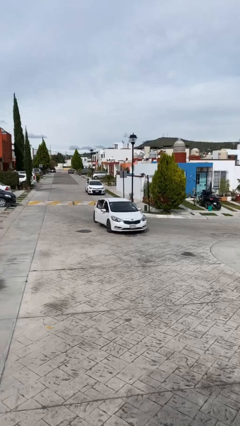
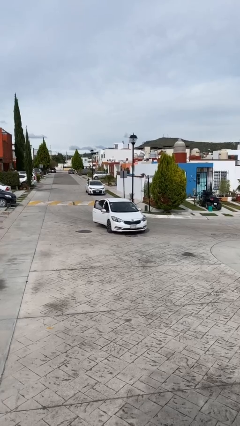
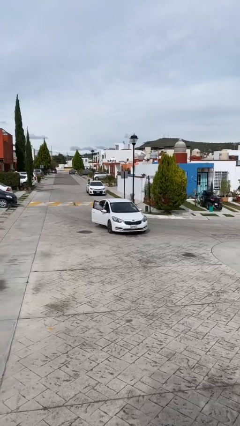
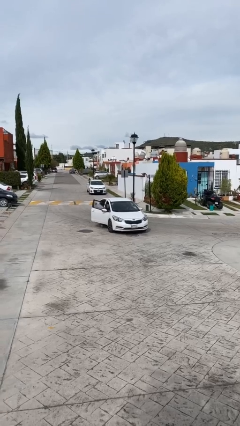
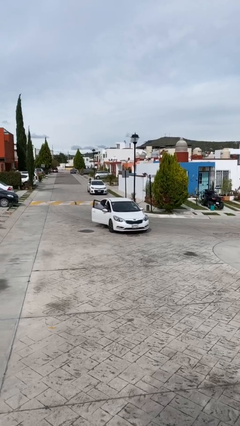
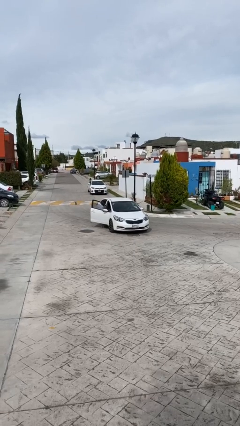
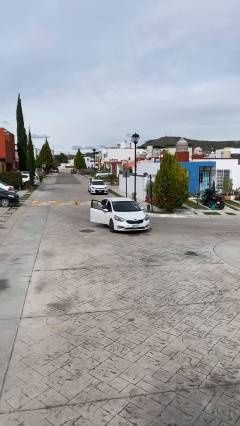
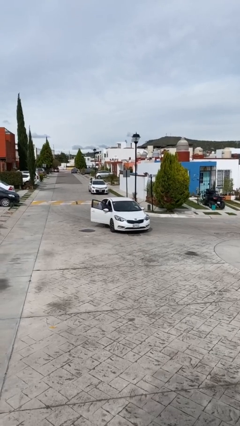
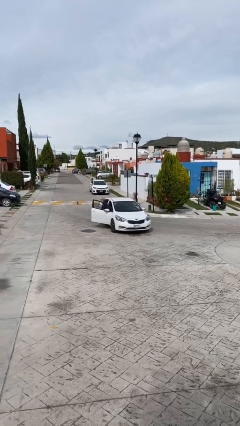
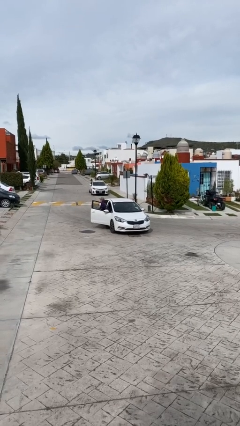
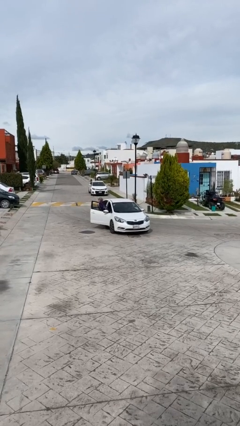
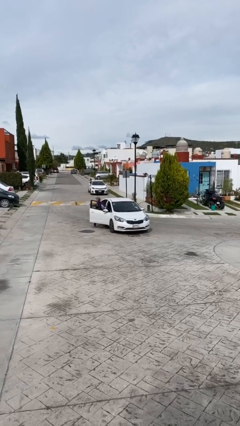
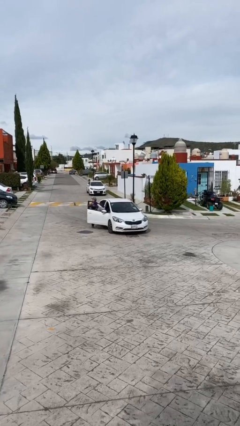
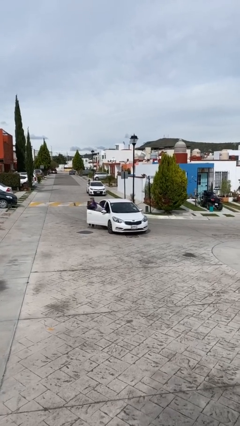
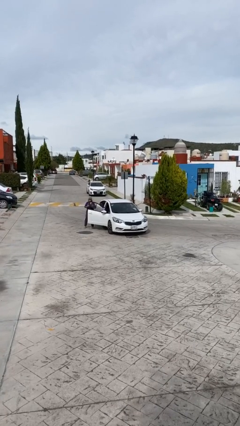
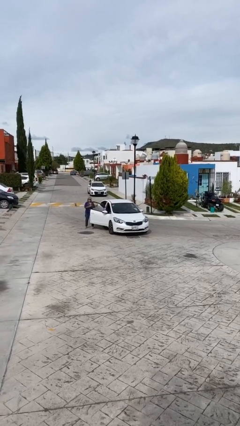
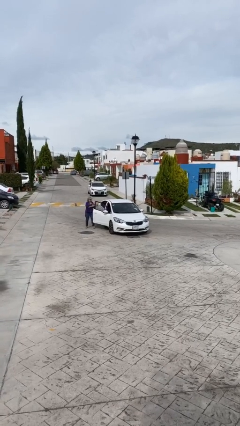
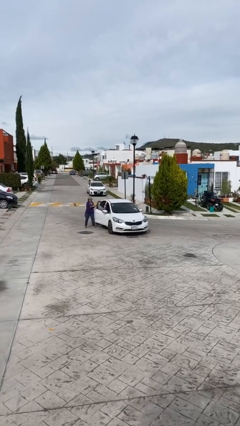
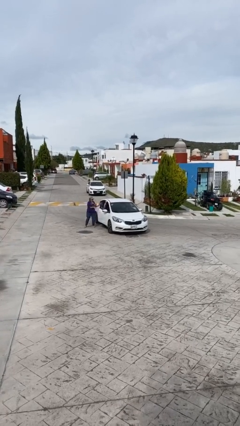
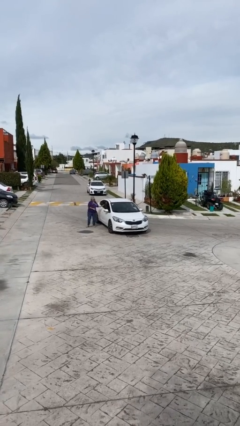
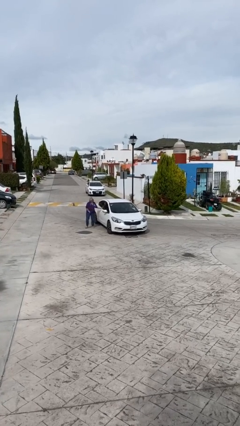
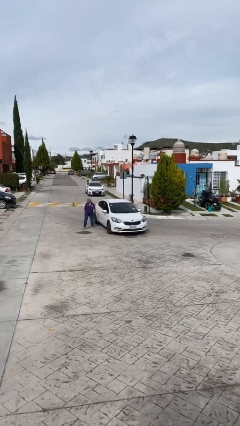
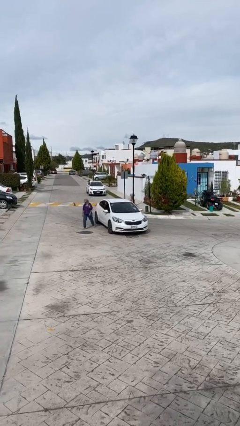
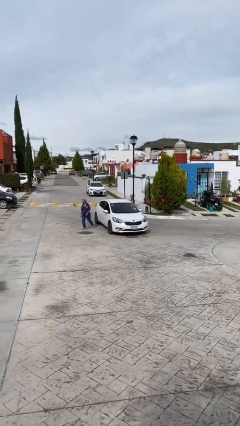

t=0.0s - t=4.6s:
car drops off person

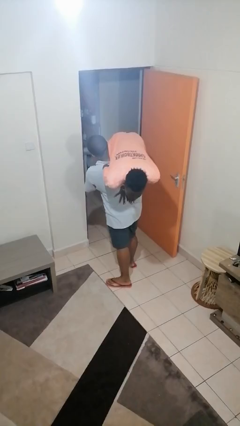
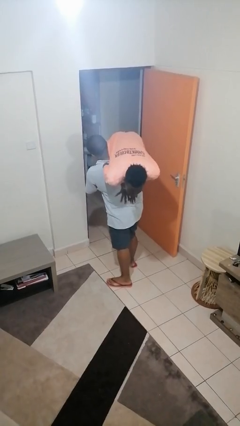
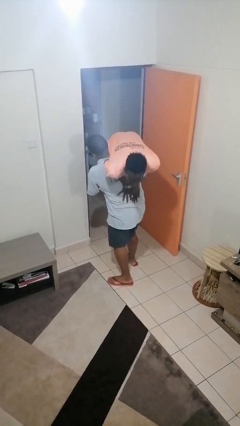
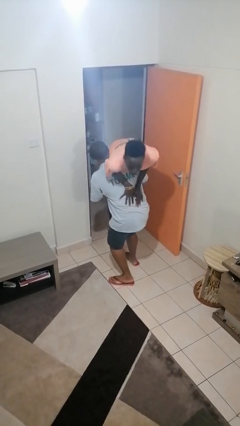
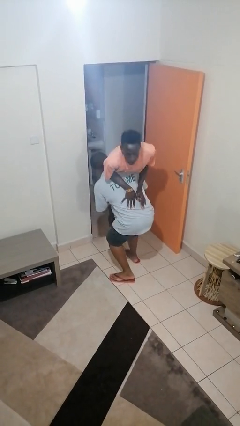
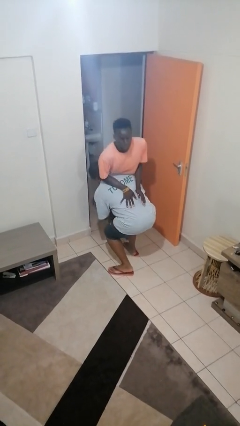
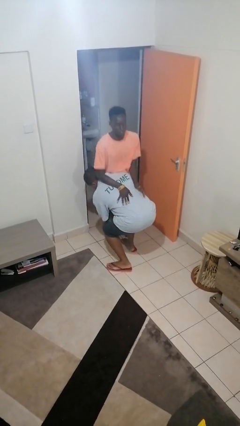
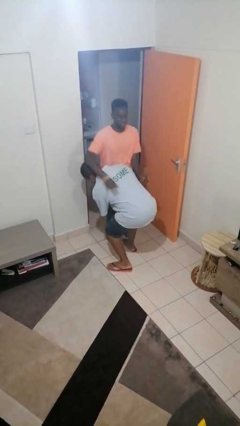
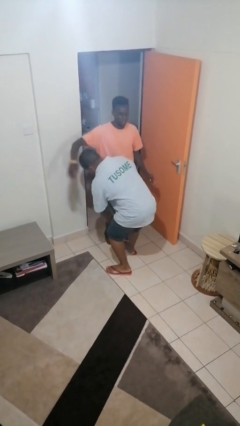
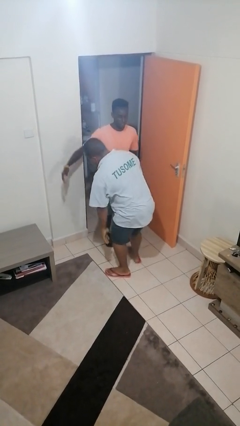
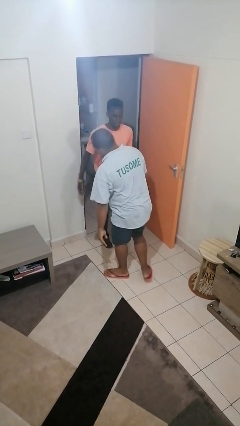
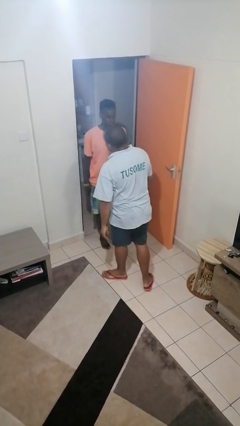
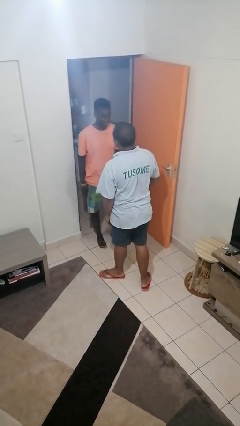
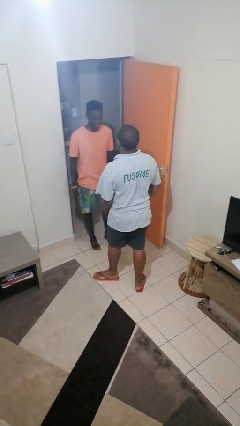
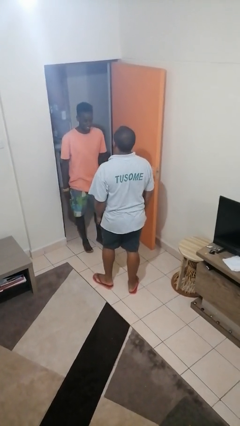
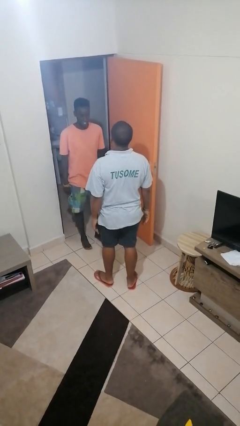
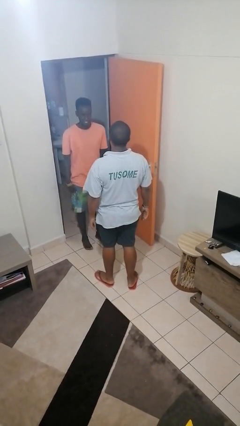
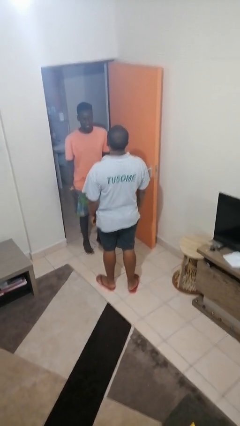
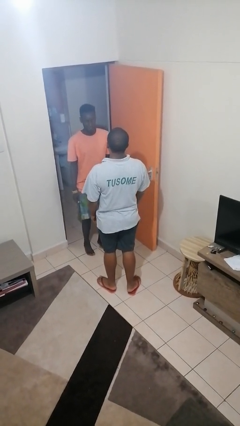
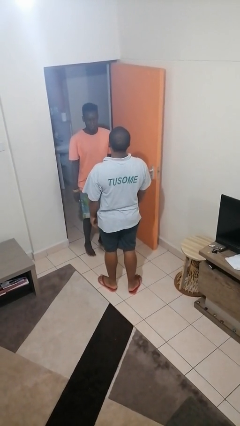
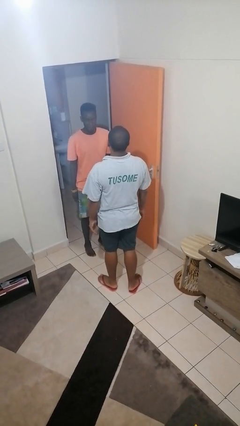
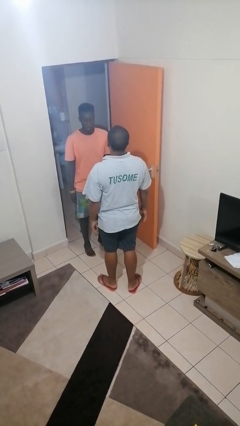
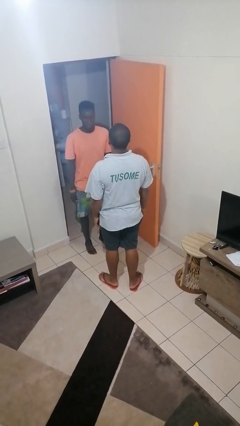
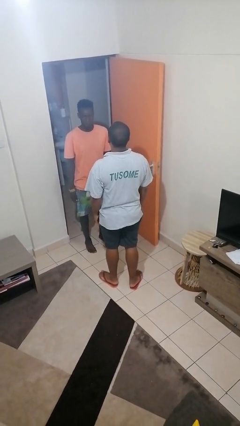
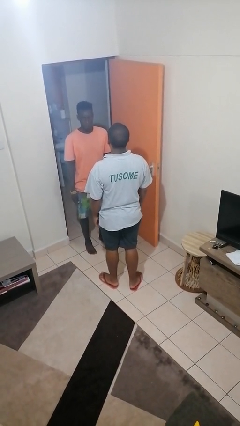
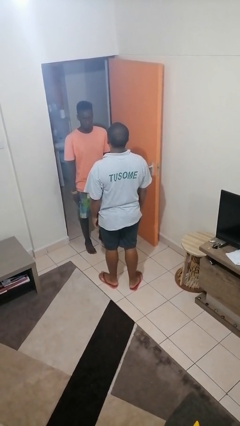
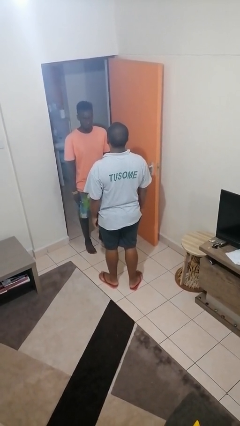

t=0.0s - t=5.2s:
person puts down person

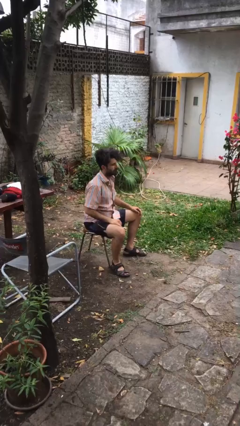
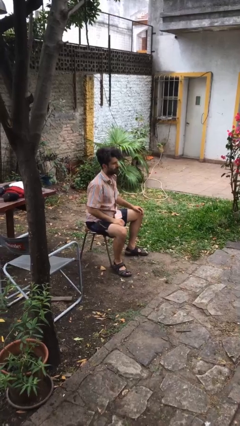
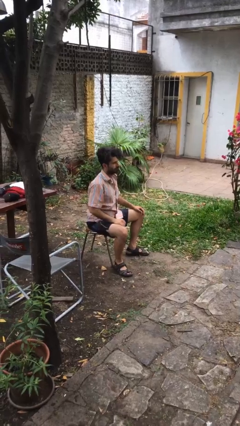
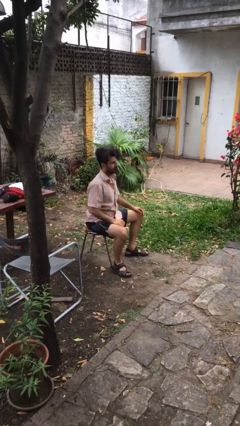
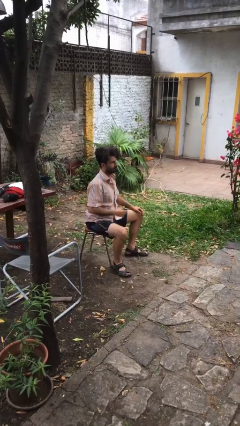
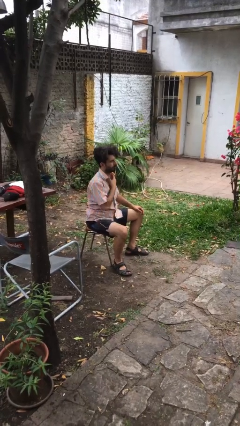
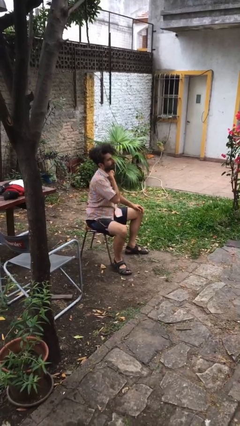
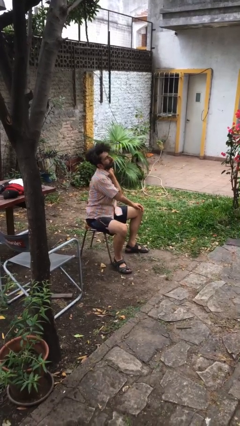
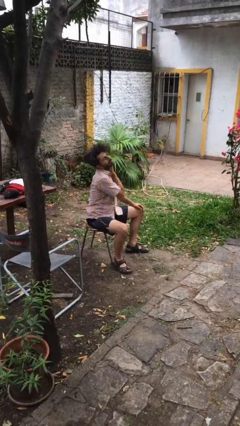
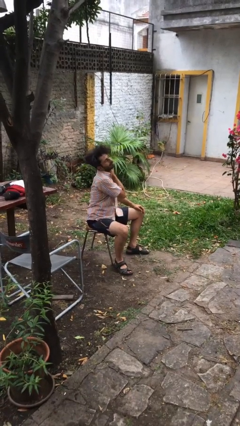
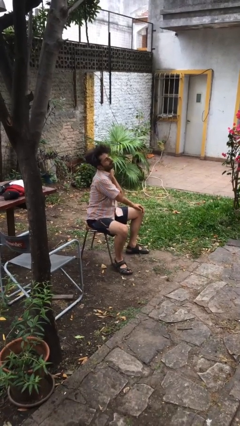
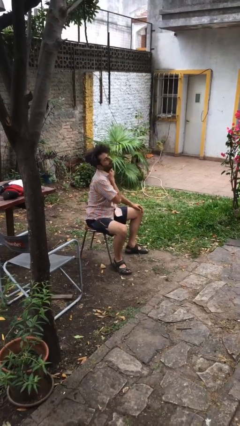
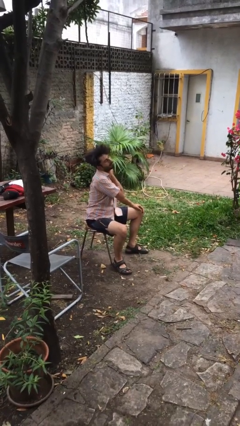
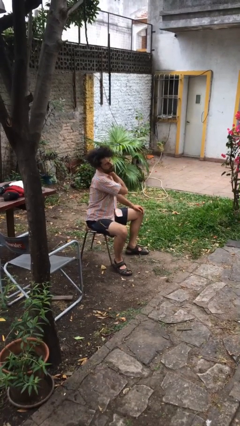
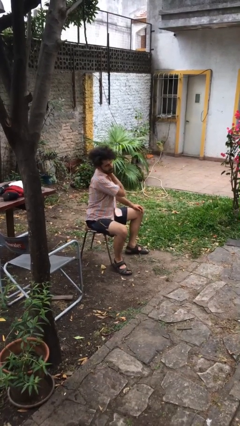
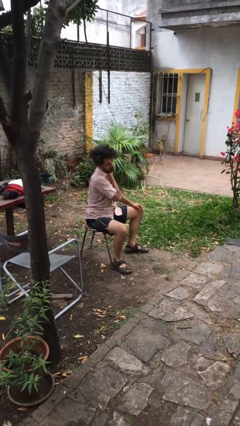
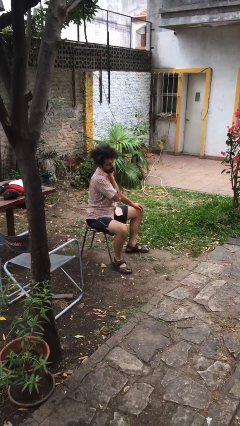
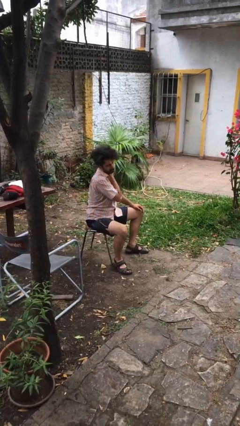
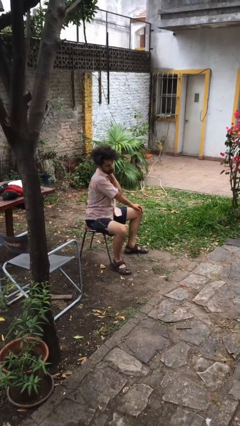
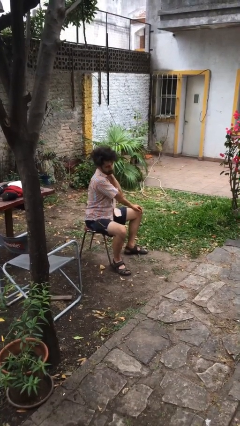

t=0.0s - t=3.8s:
person rubs neck

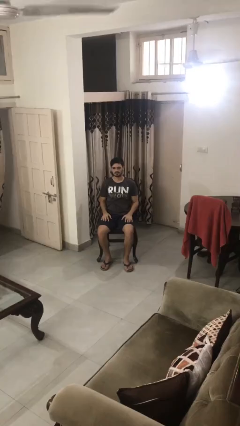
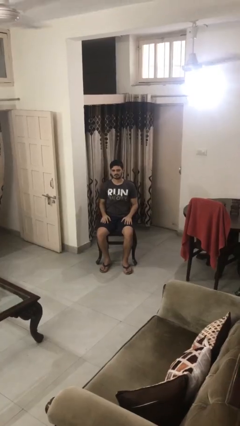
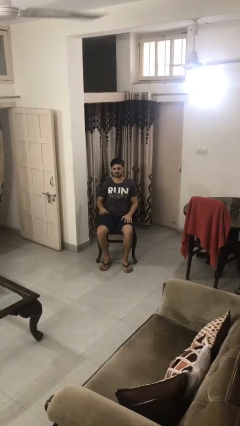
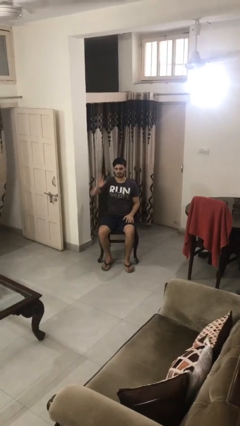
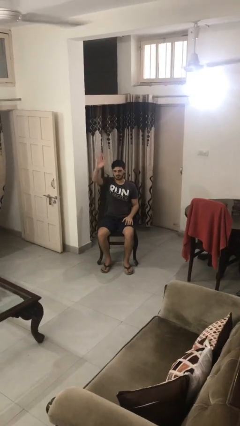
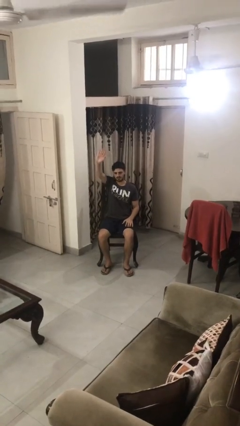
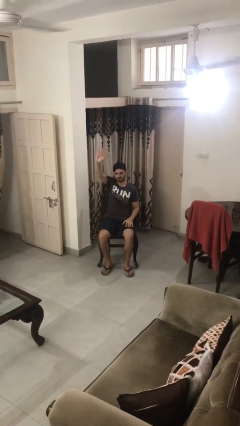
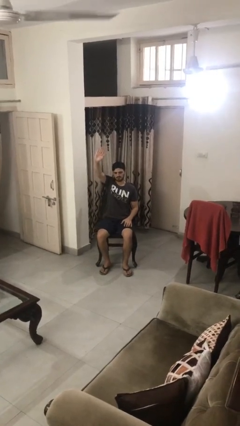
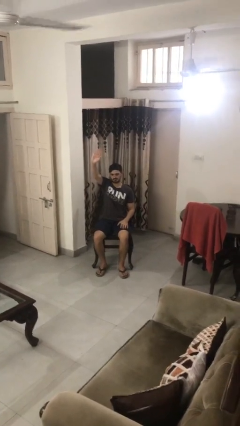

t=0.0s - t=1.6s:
person gestures raise hand

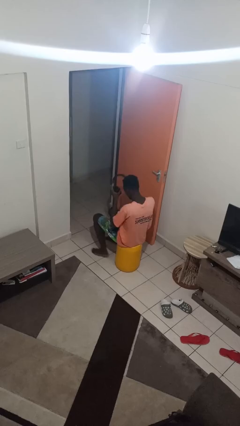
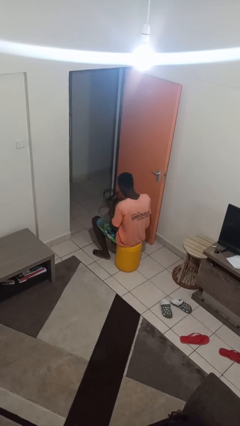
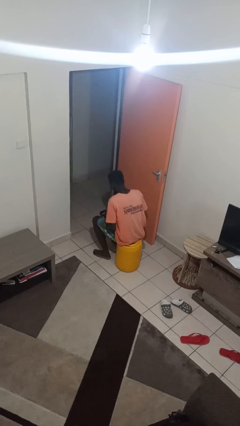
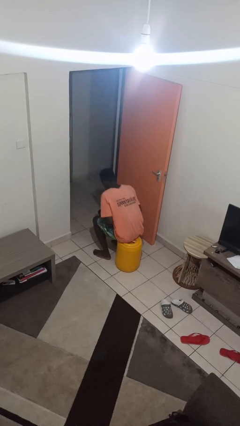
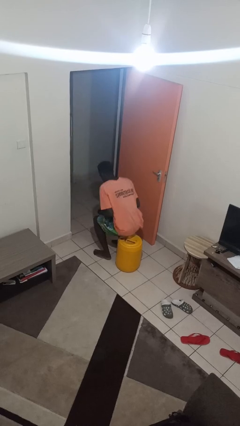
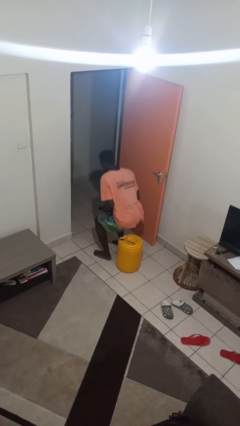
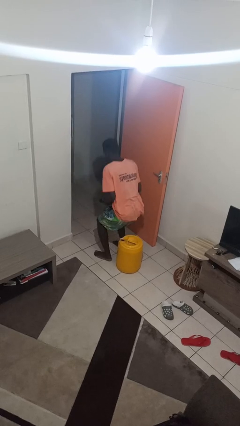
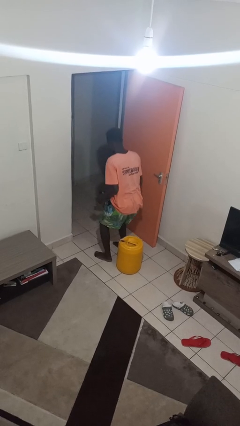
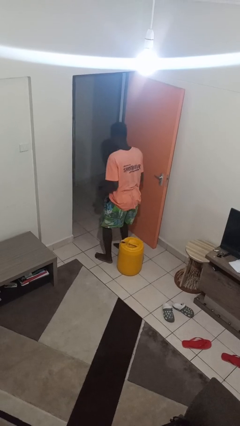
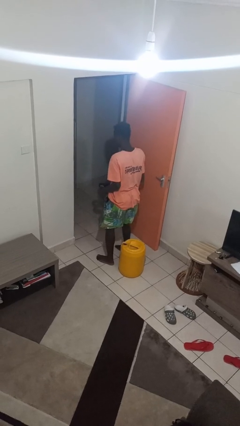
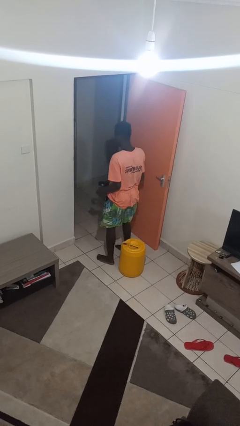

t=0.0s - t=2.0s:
person takes off headphones

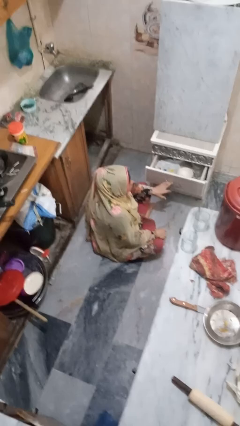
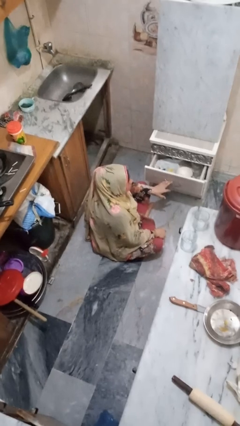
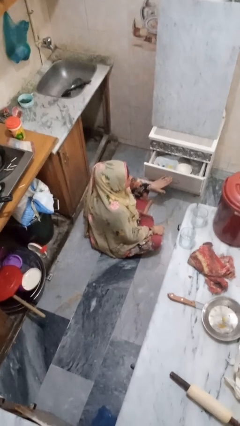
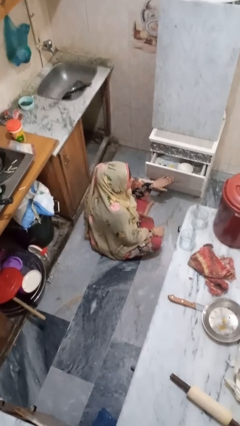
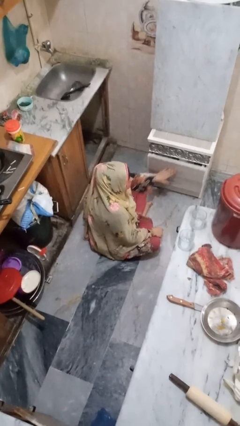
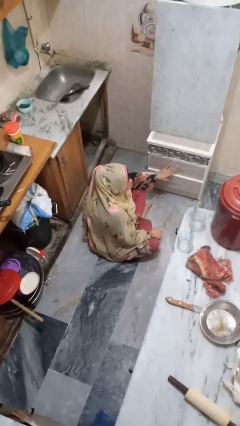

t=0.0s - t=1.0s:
person closes kitchen drawer
